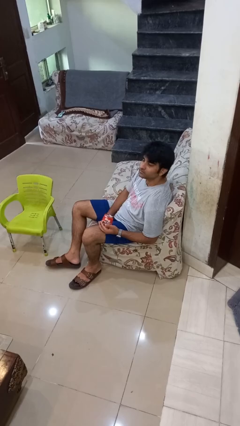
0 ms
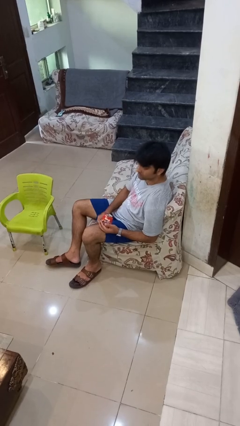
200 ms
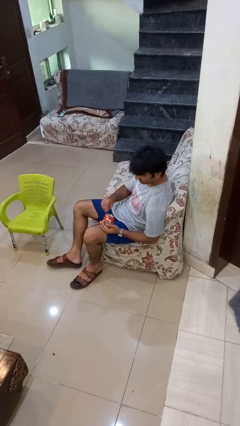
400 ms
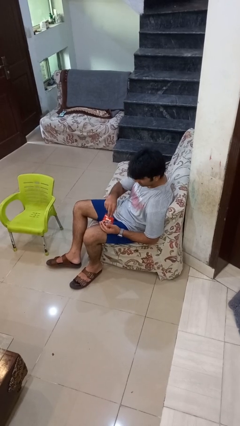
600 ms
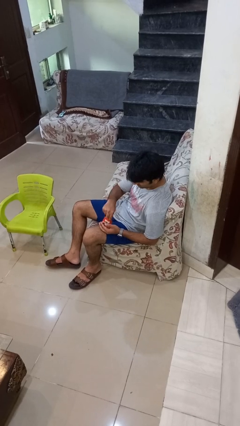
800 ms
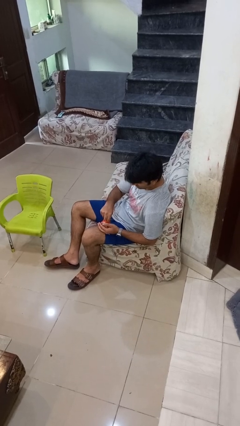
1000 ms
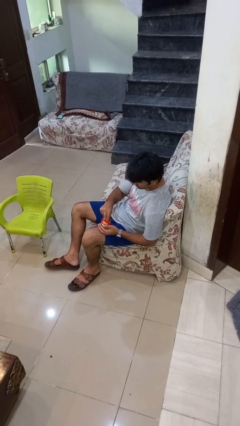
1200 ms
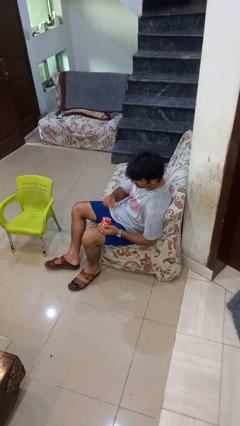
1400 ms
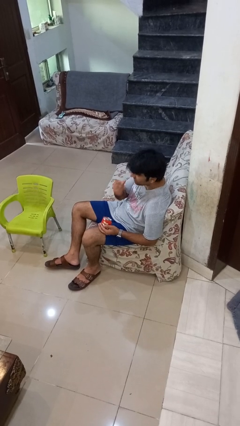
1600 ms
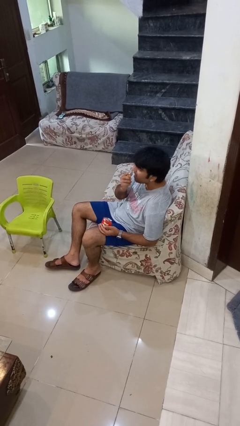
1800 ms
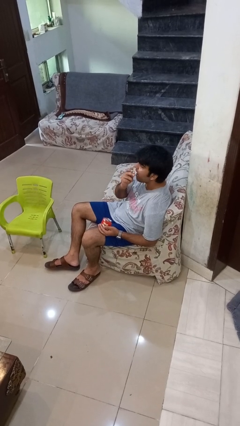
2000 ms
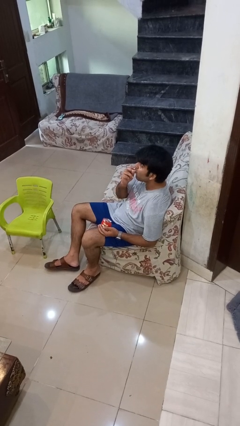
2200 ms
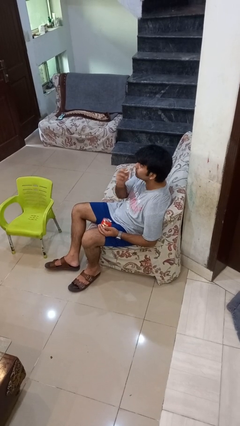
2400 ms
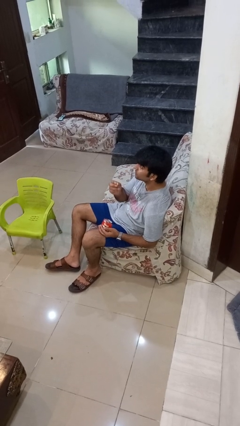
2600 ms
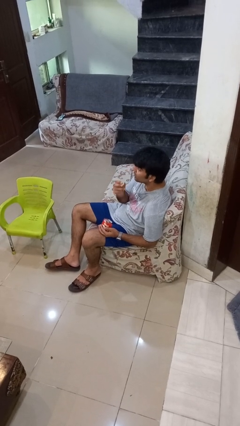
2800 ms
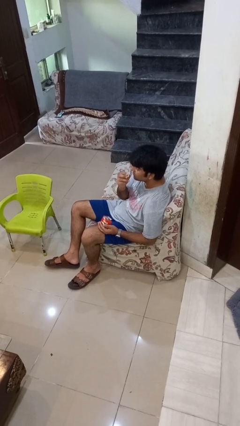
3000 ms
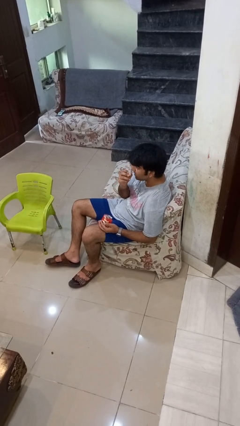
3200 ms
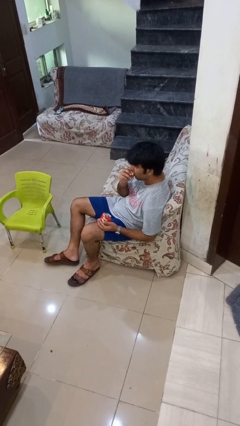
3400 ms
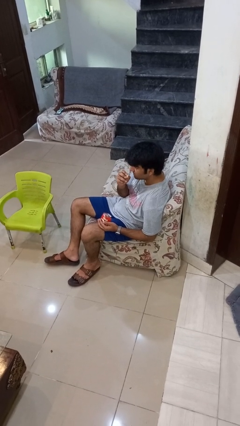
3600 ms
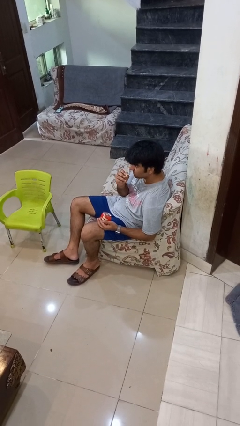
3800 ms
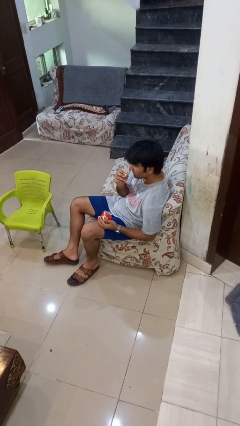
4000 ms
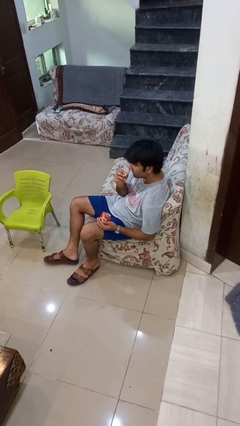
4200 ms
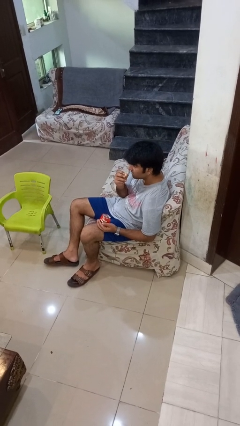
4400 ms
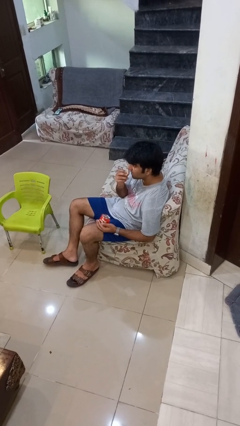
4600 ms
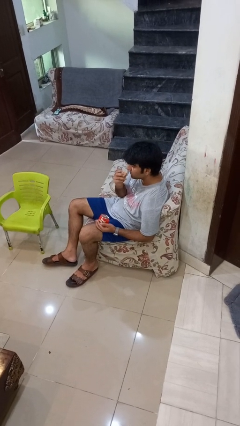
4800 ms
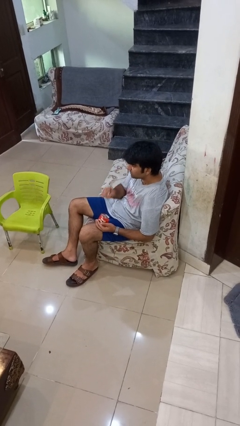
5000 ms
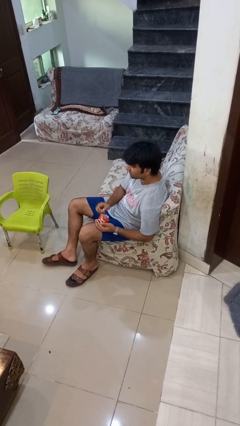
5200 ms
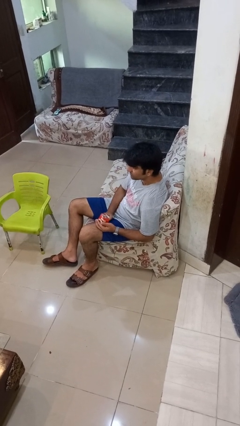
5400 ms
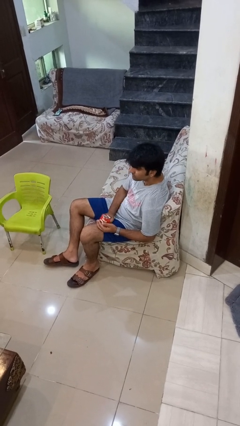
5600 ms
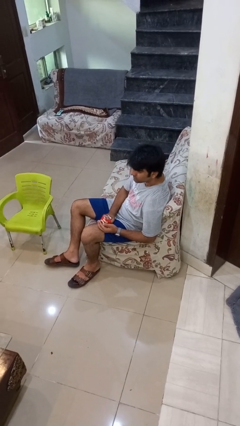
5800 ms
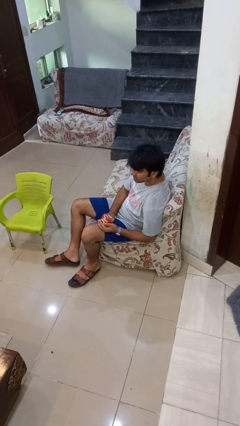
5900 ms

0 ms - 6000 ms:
person eats snack from bag

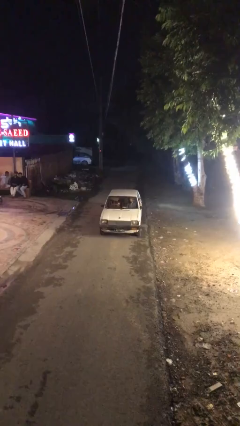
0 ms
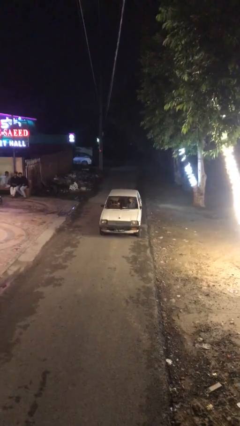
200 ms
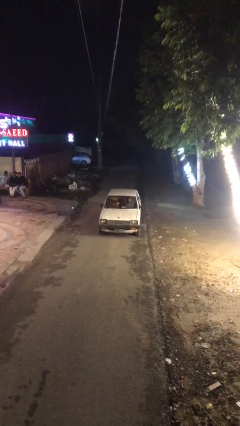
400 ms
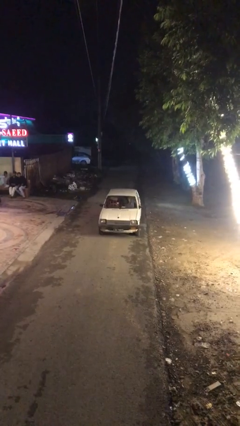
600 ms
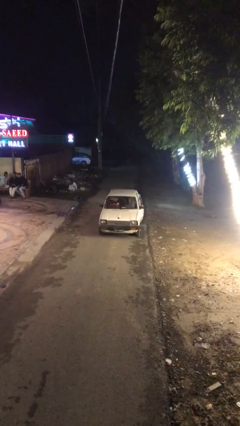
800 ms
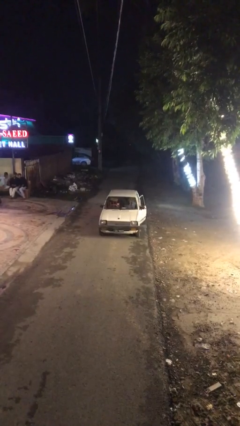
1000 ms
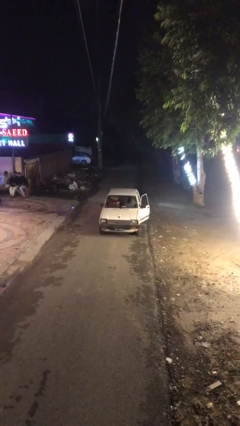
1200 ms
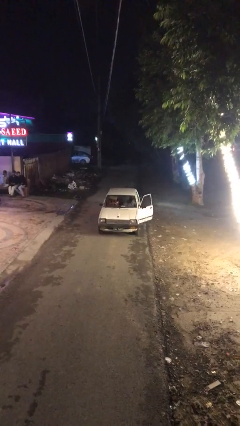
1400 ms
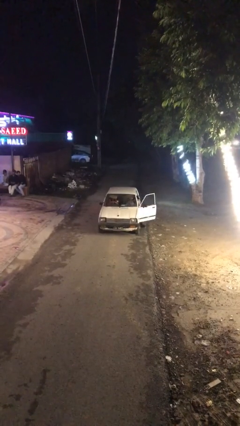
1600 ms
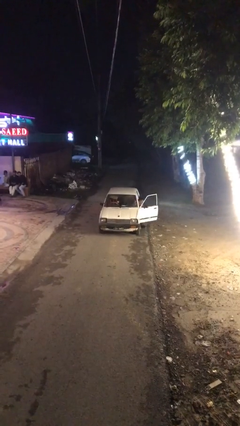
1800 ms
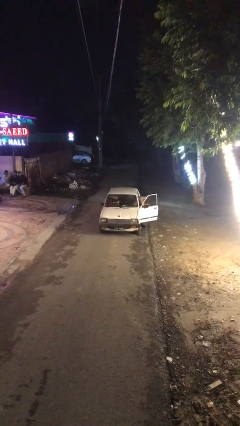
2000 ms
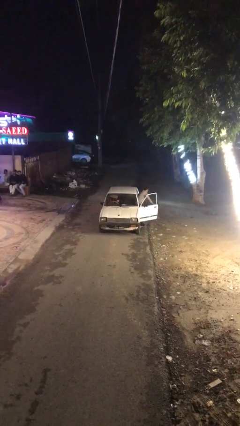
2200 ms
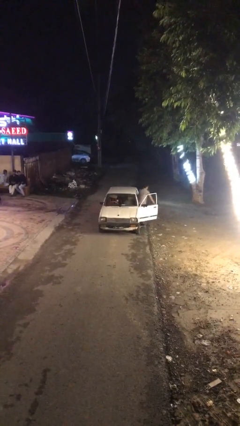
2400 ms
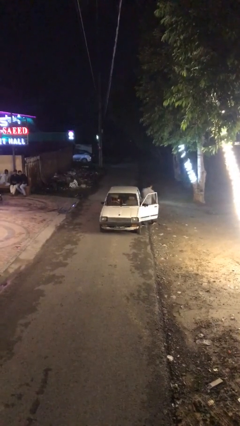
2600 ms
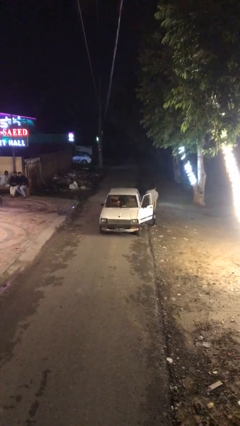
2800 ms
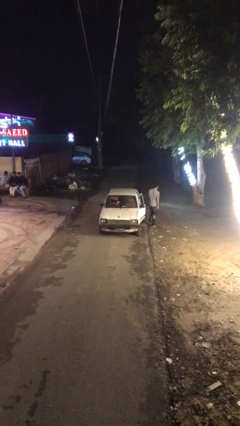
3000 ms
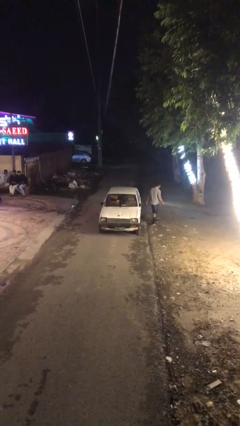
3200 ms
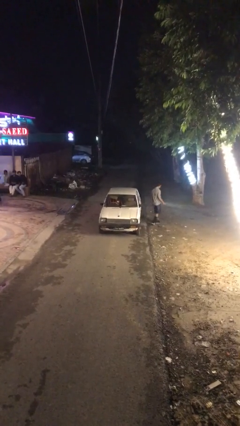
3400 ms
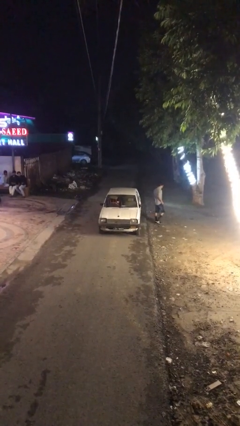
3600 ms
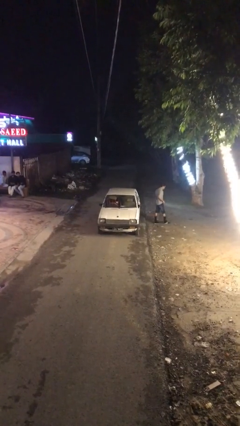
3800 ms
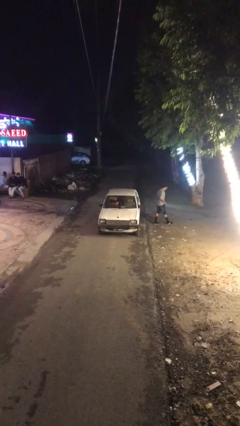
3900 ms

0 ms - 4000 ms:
car drops off person

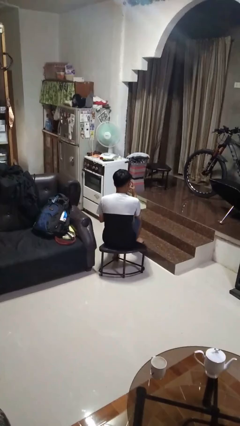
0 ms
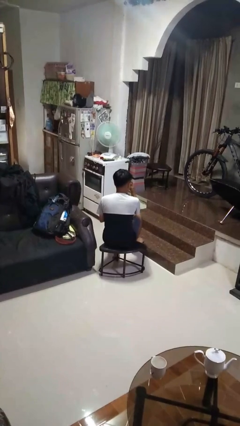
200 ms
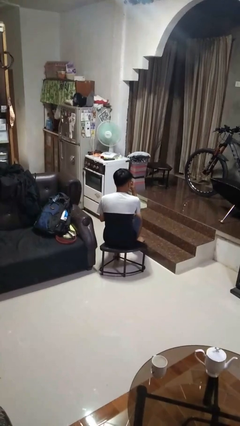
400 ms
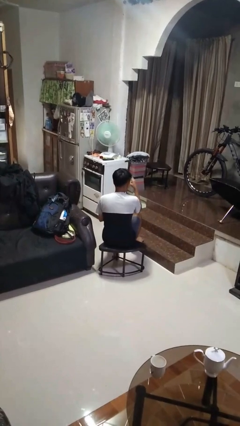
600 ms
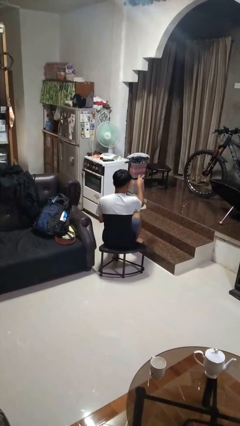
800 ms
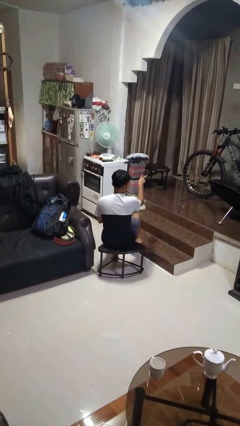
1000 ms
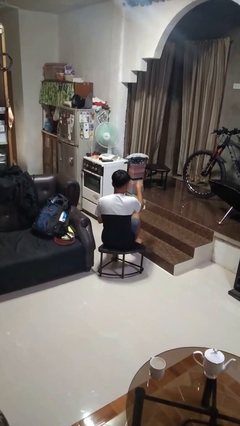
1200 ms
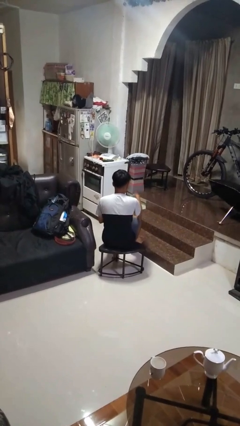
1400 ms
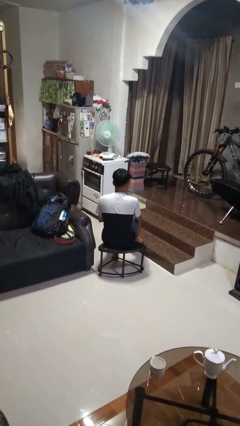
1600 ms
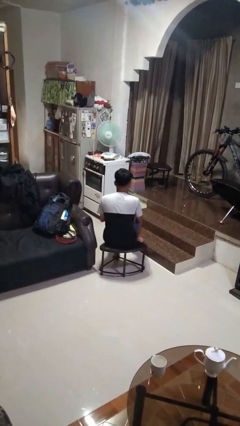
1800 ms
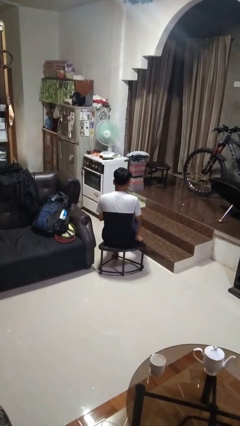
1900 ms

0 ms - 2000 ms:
person gestures watch closely

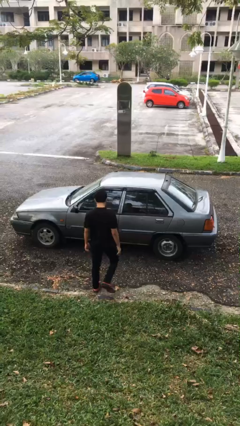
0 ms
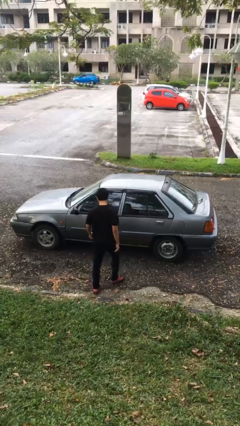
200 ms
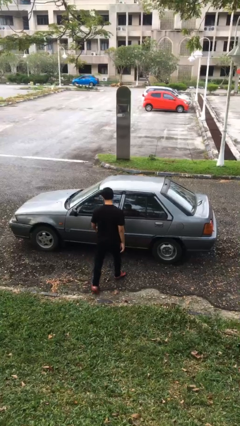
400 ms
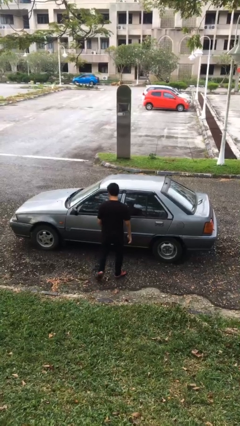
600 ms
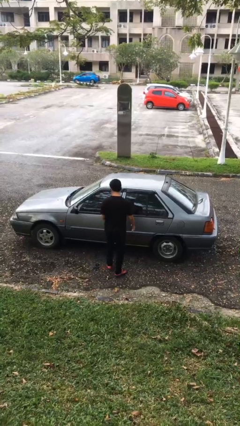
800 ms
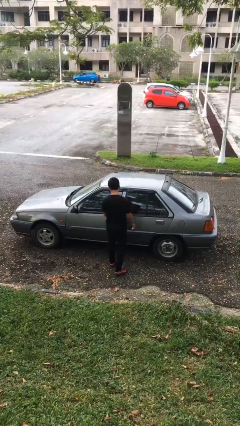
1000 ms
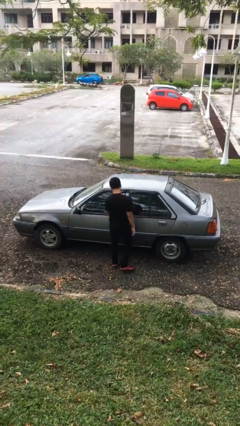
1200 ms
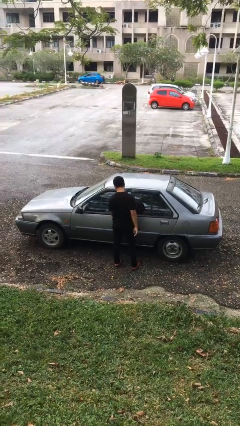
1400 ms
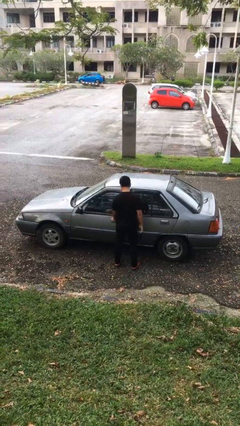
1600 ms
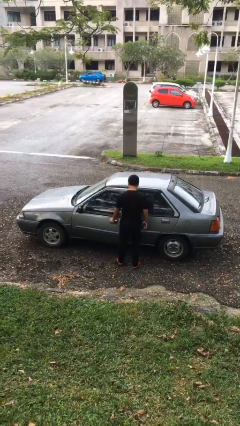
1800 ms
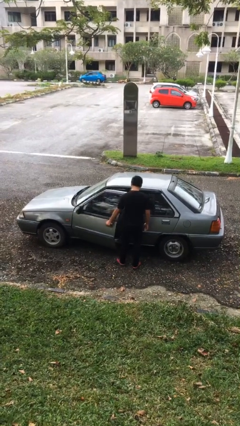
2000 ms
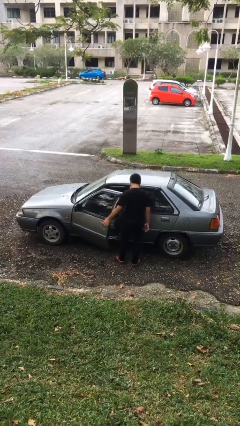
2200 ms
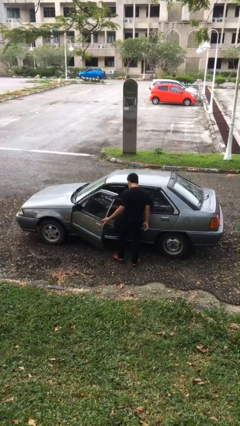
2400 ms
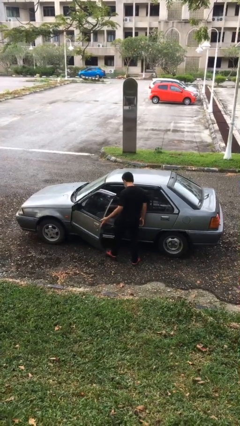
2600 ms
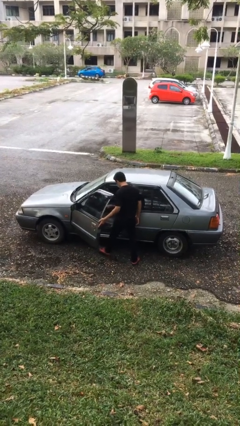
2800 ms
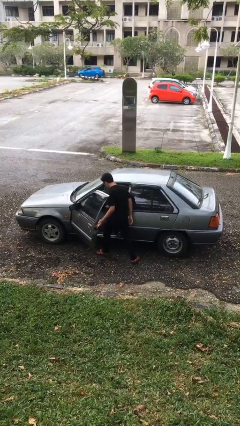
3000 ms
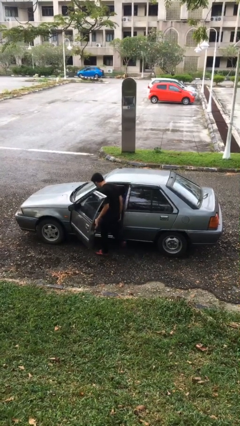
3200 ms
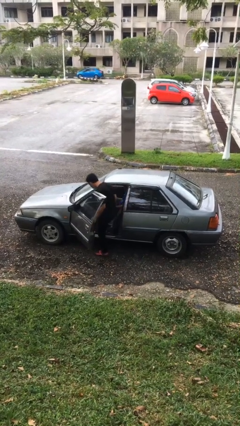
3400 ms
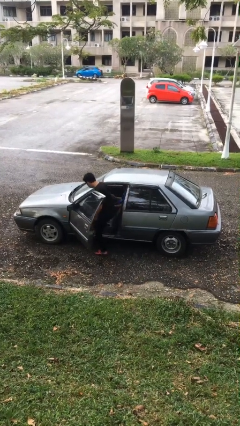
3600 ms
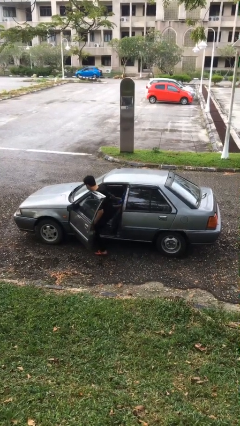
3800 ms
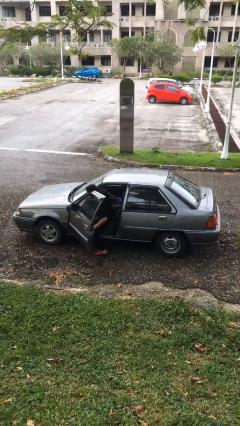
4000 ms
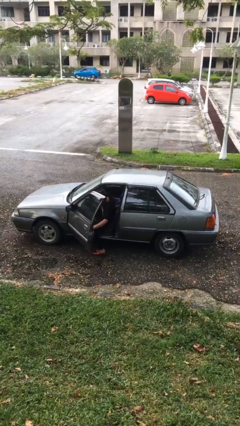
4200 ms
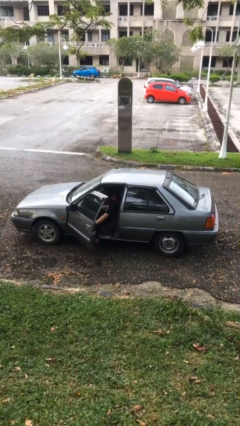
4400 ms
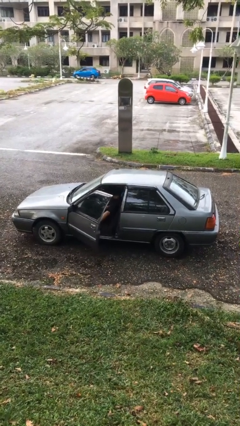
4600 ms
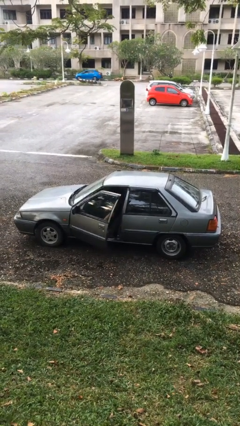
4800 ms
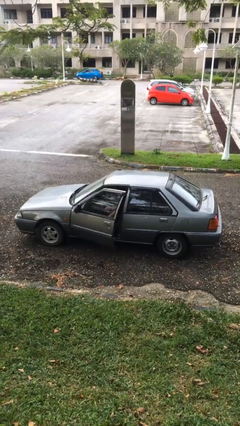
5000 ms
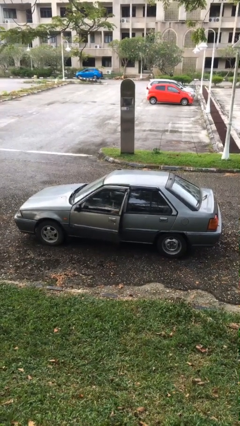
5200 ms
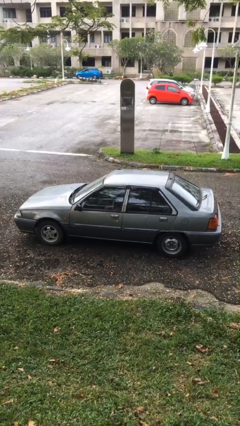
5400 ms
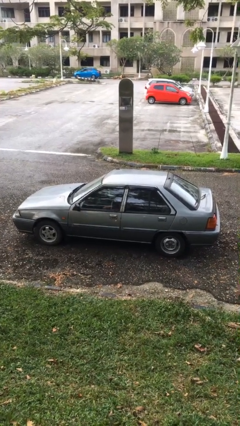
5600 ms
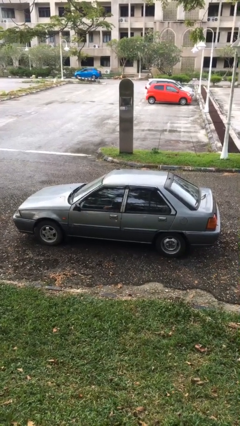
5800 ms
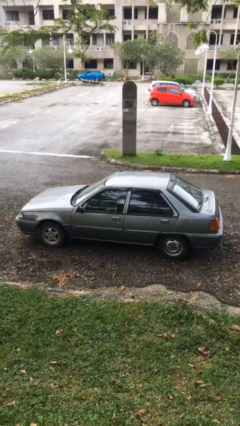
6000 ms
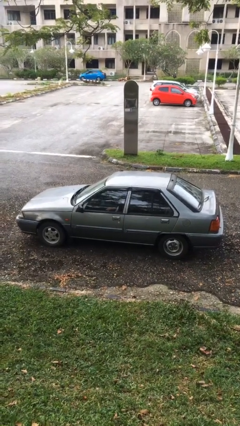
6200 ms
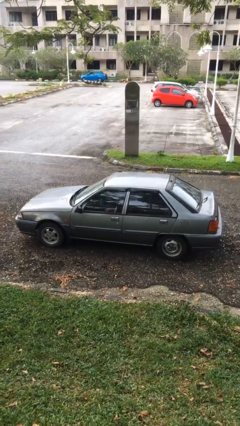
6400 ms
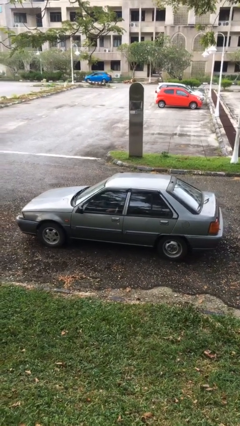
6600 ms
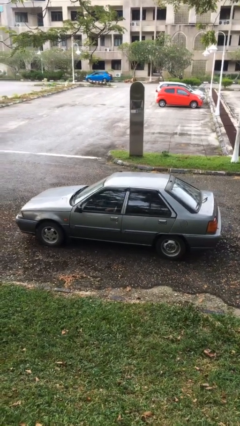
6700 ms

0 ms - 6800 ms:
car picks up person
